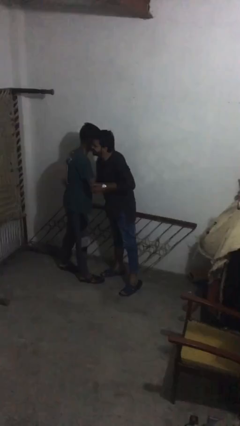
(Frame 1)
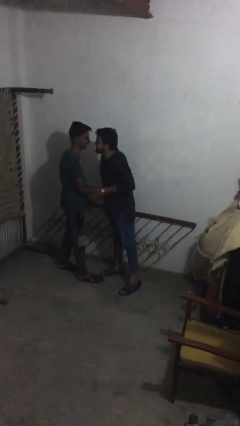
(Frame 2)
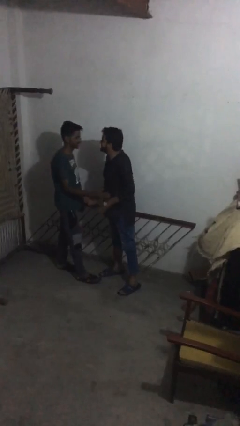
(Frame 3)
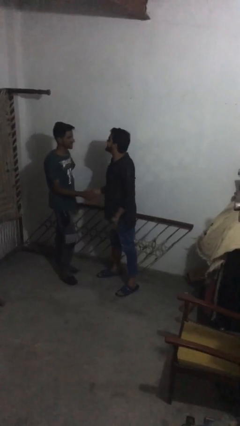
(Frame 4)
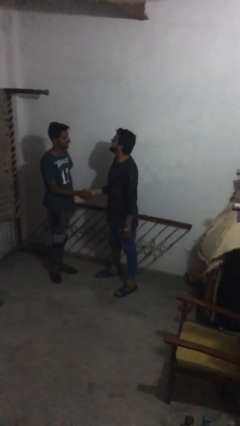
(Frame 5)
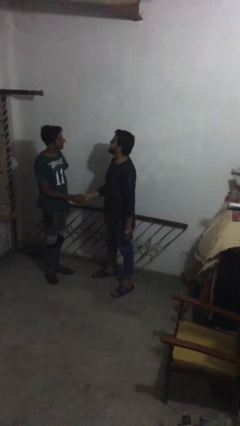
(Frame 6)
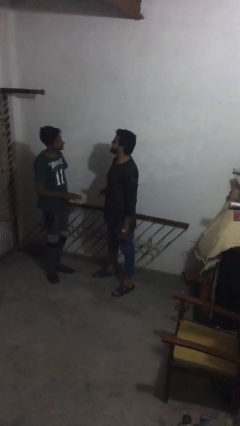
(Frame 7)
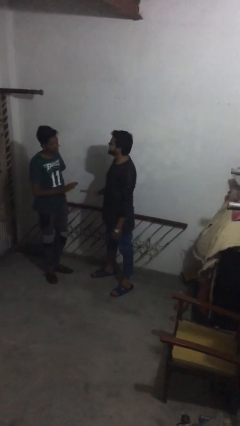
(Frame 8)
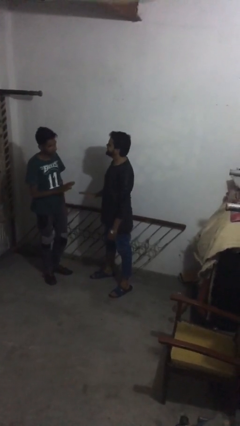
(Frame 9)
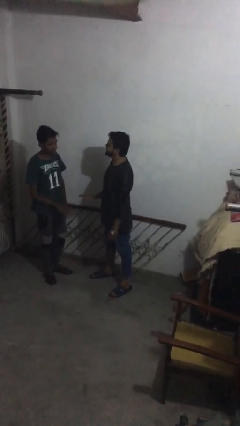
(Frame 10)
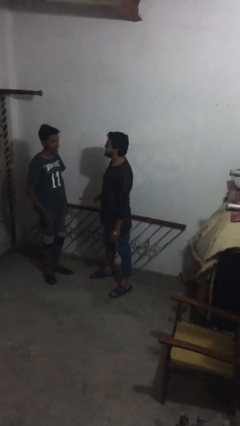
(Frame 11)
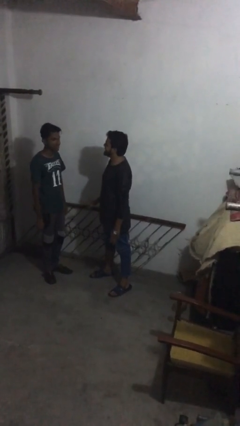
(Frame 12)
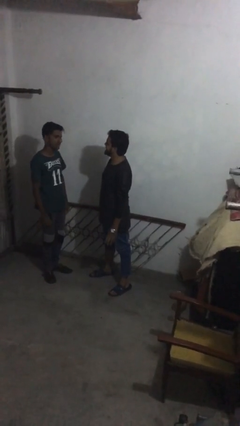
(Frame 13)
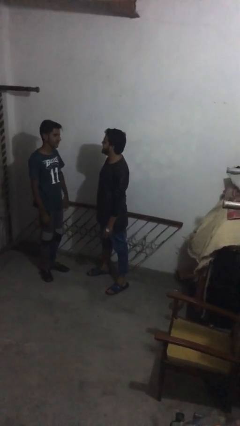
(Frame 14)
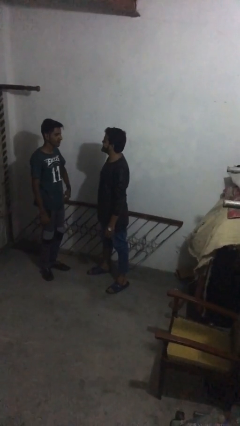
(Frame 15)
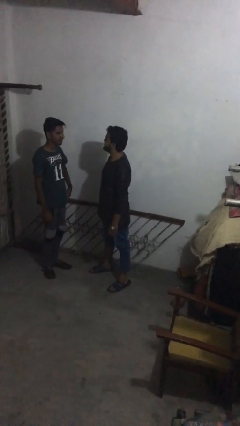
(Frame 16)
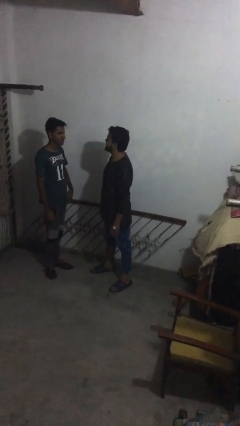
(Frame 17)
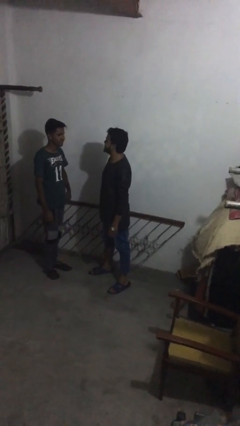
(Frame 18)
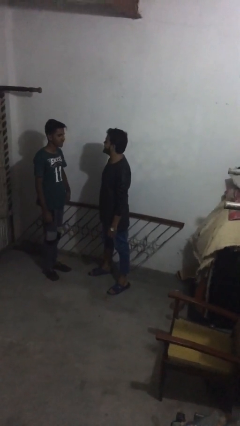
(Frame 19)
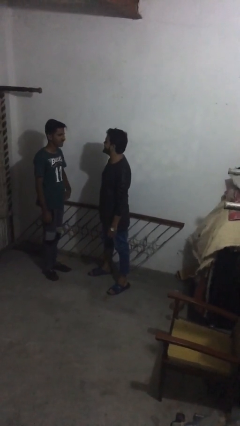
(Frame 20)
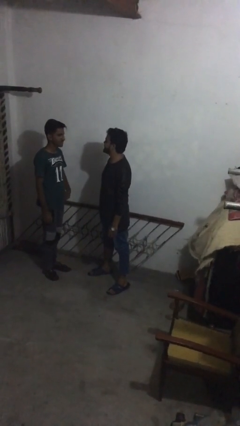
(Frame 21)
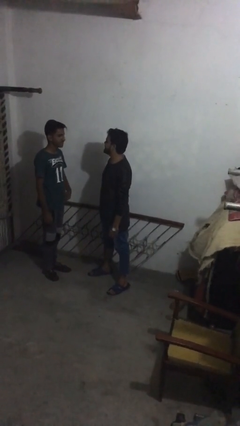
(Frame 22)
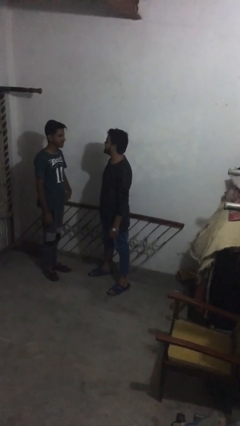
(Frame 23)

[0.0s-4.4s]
person talks to person

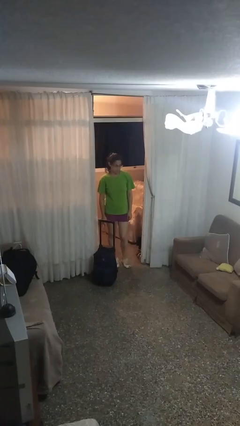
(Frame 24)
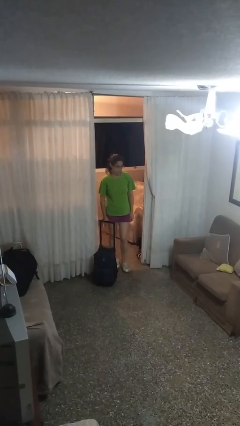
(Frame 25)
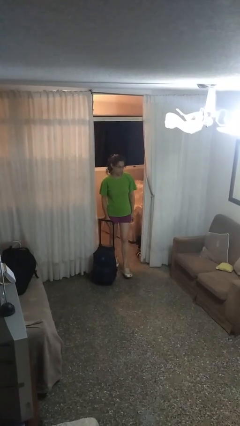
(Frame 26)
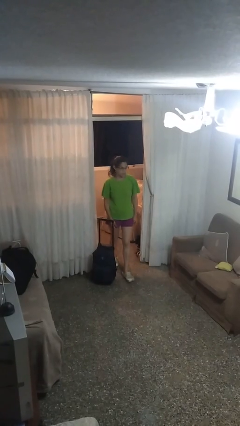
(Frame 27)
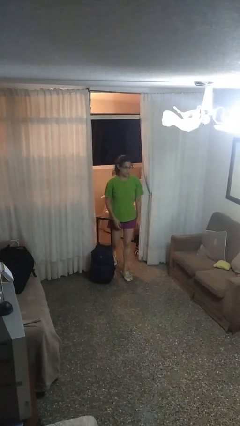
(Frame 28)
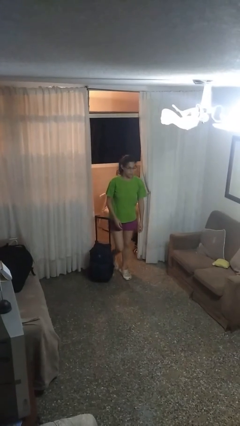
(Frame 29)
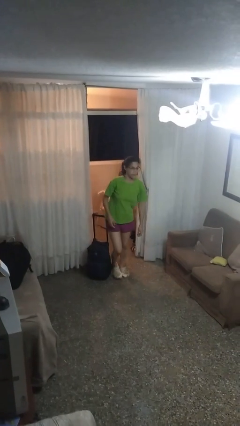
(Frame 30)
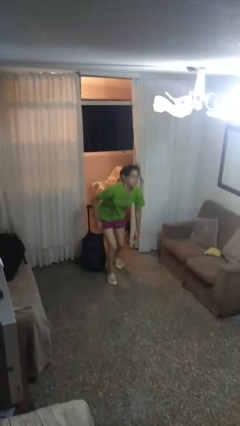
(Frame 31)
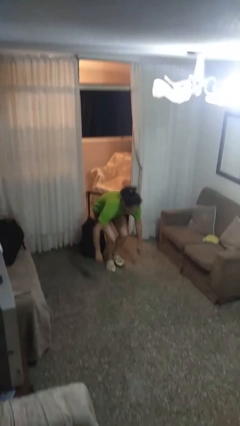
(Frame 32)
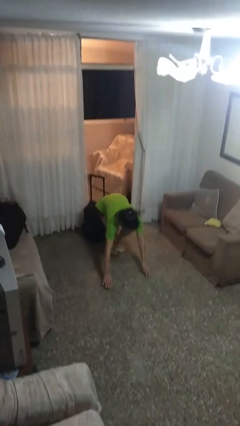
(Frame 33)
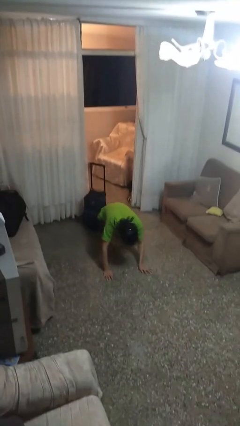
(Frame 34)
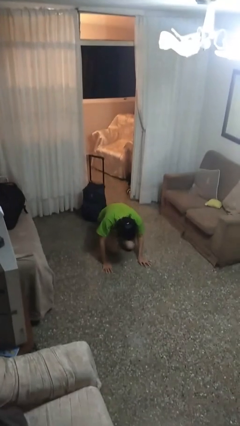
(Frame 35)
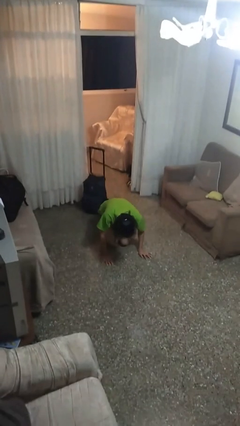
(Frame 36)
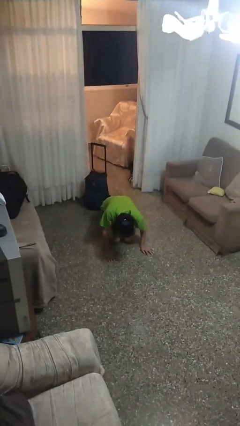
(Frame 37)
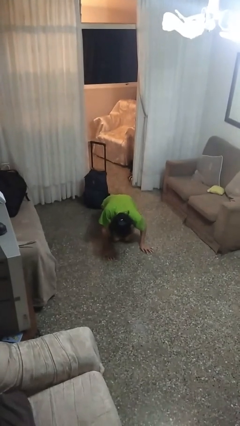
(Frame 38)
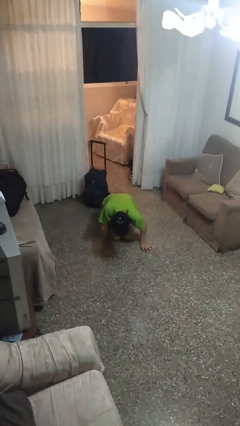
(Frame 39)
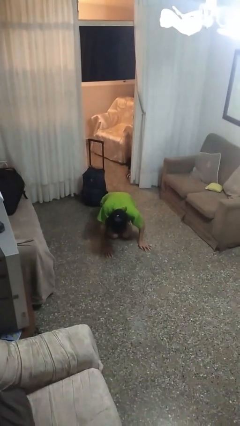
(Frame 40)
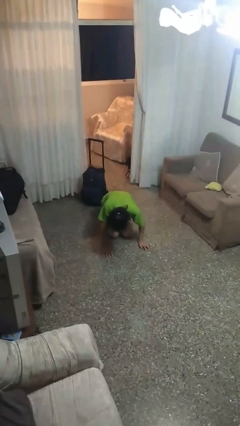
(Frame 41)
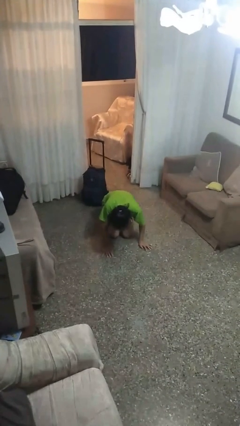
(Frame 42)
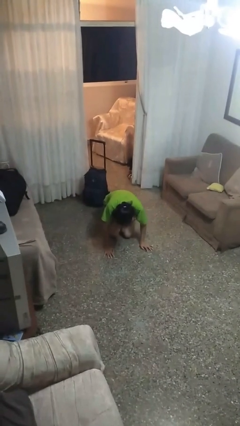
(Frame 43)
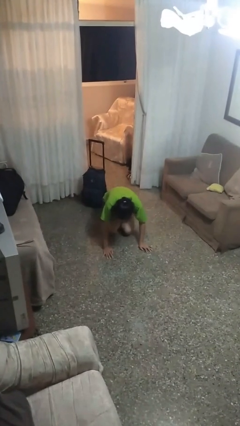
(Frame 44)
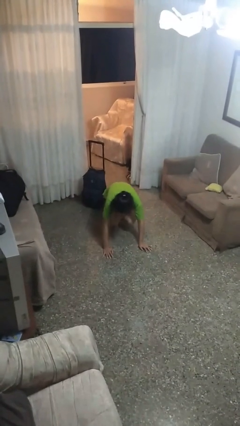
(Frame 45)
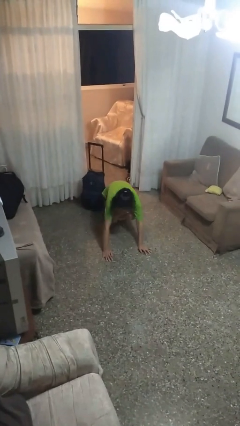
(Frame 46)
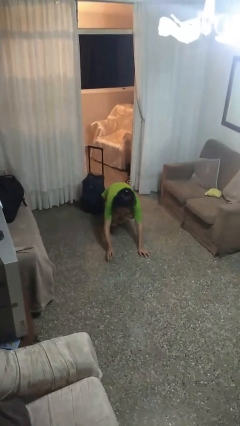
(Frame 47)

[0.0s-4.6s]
person trips on object on floor

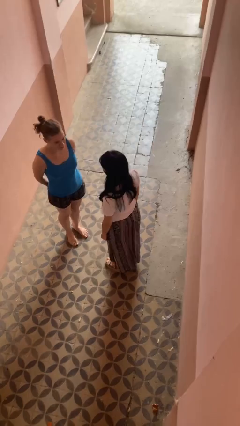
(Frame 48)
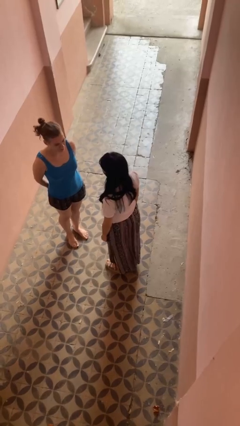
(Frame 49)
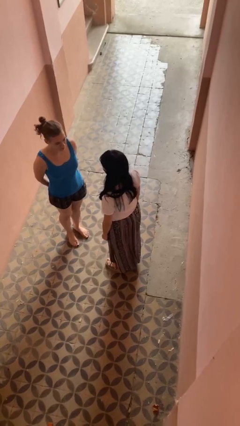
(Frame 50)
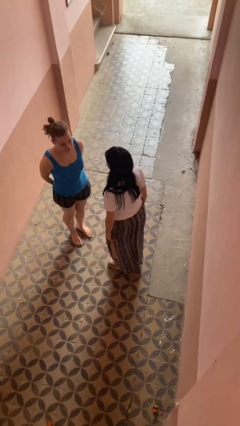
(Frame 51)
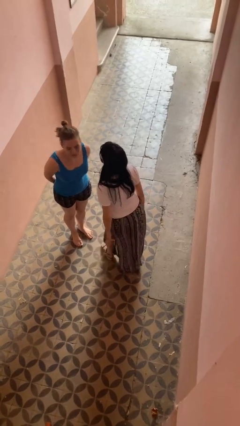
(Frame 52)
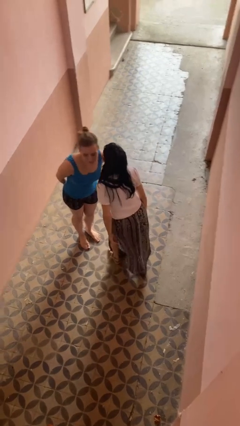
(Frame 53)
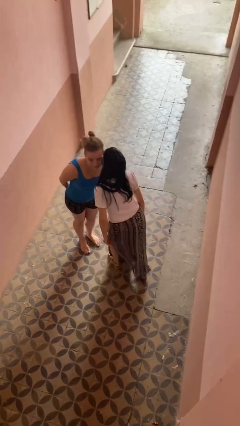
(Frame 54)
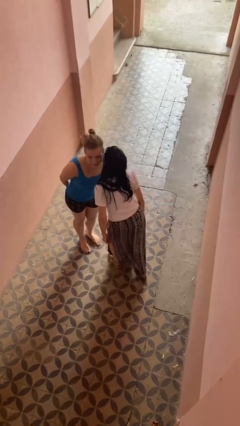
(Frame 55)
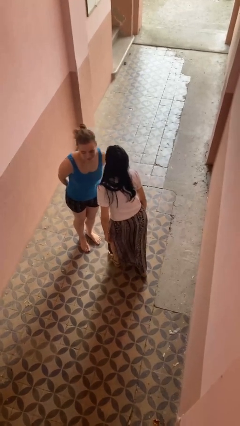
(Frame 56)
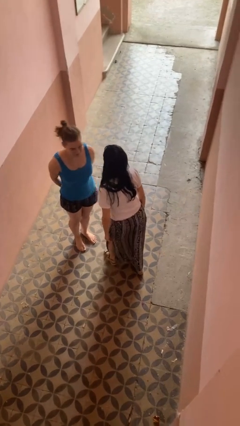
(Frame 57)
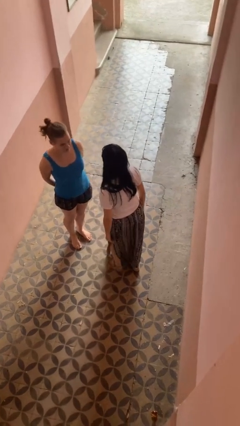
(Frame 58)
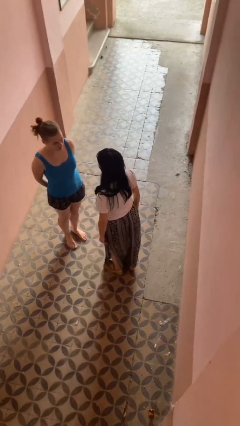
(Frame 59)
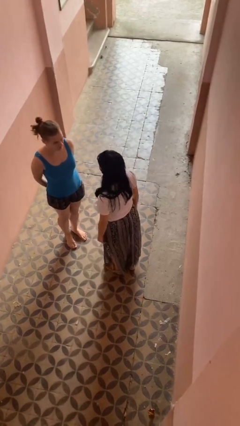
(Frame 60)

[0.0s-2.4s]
person kisses cheek of person

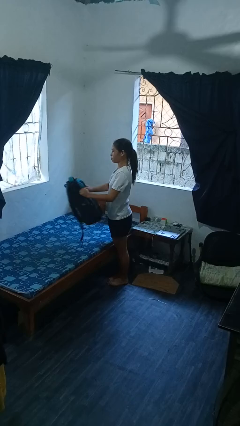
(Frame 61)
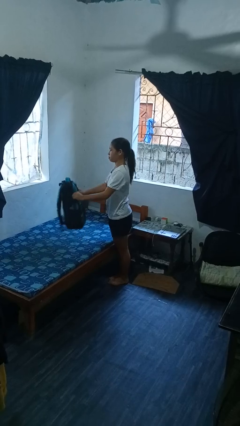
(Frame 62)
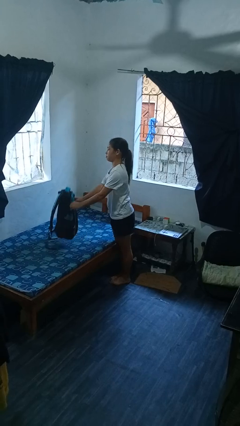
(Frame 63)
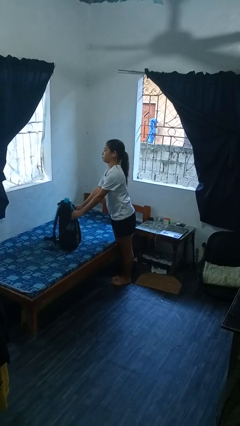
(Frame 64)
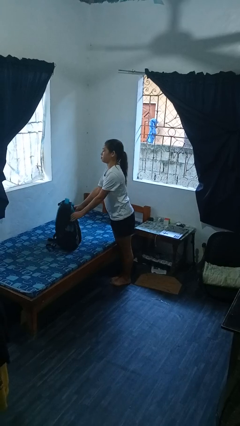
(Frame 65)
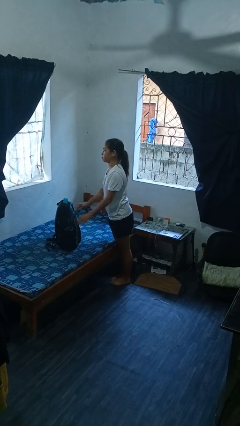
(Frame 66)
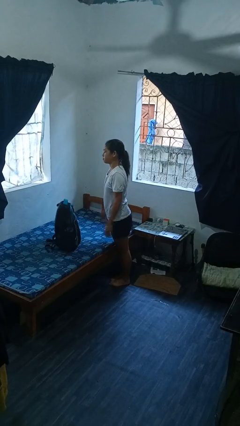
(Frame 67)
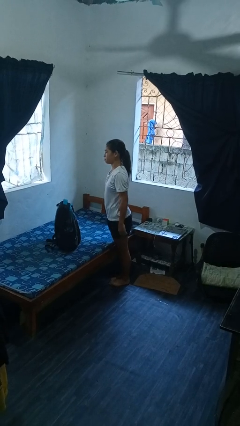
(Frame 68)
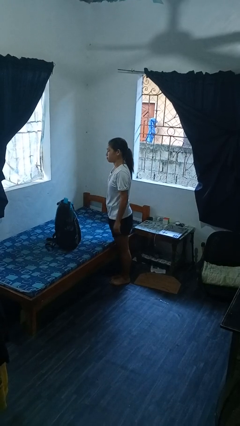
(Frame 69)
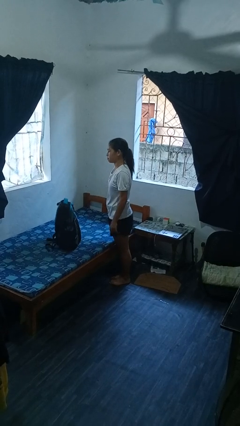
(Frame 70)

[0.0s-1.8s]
person puts down object on bed

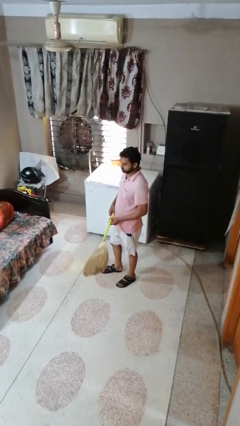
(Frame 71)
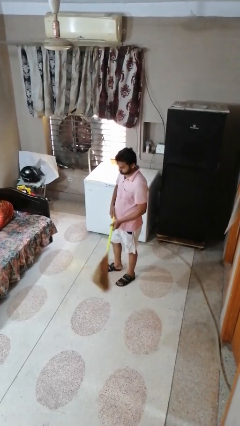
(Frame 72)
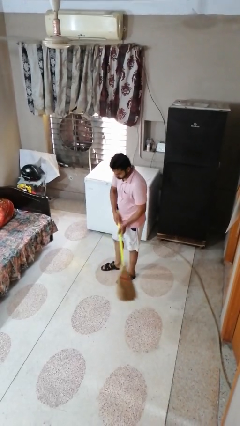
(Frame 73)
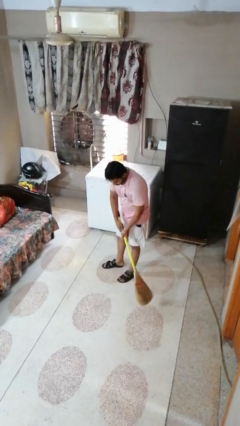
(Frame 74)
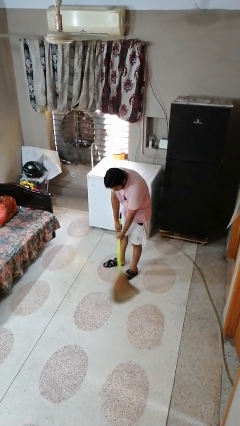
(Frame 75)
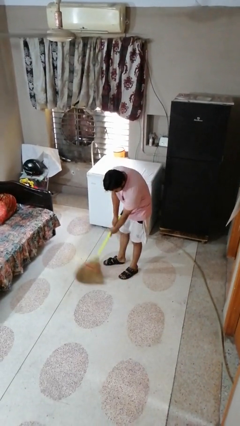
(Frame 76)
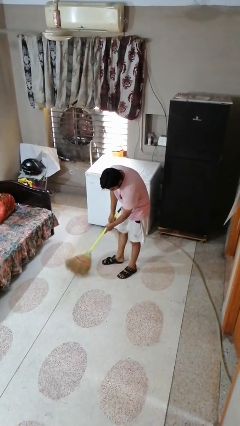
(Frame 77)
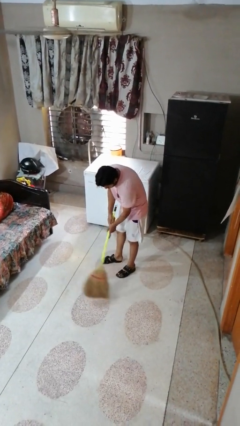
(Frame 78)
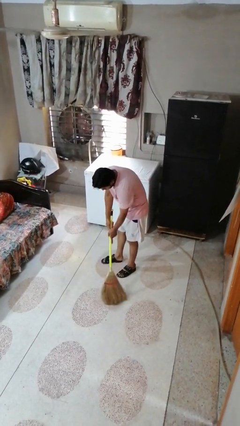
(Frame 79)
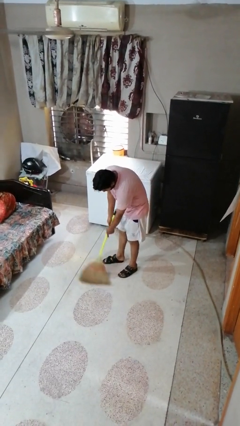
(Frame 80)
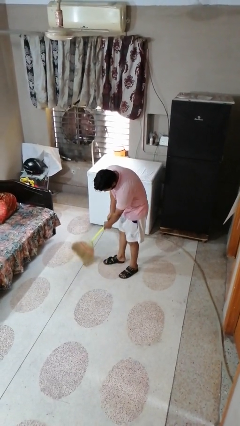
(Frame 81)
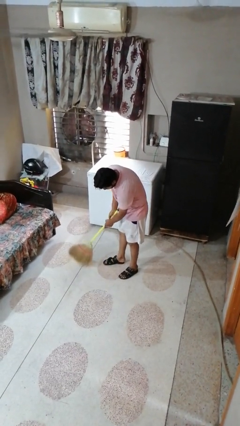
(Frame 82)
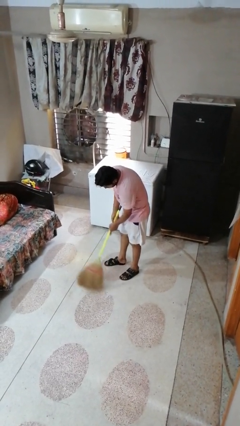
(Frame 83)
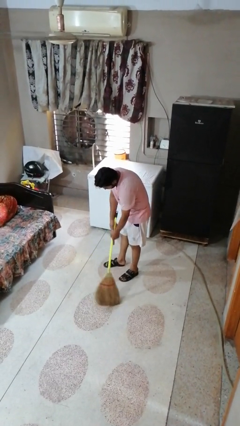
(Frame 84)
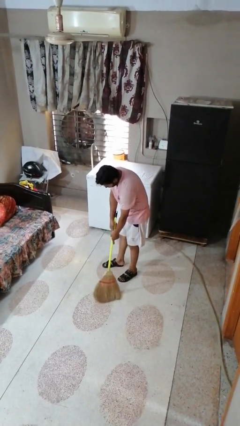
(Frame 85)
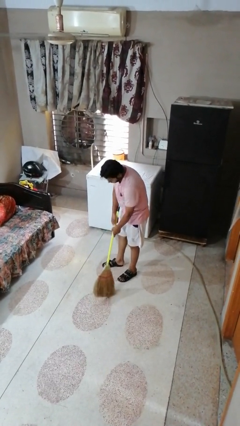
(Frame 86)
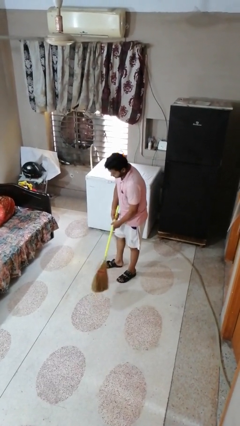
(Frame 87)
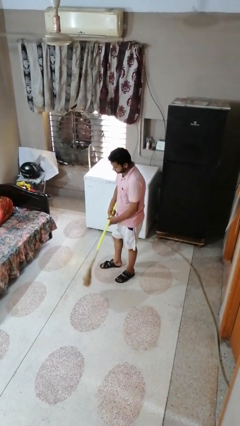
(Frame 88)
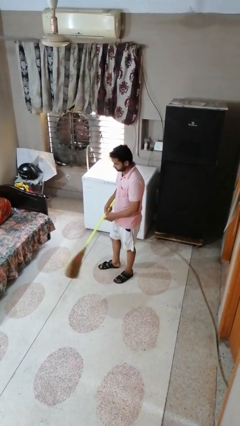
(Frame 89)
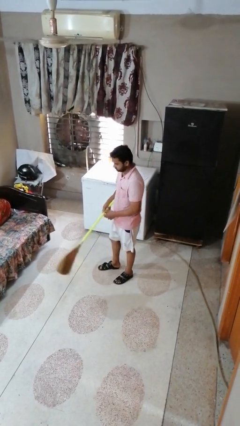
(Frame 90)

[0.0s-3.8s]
person sweeps floor

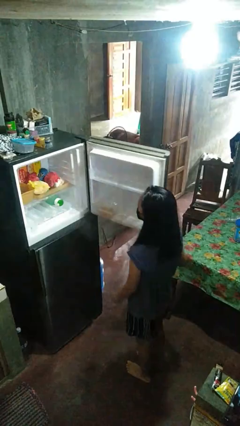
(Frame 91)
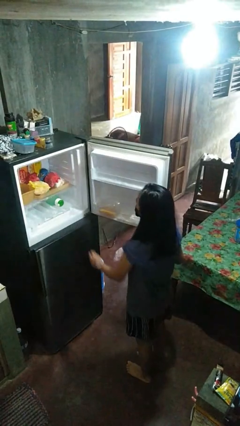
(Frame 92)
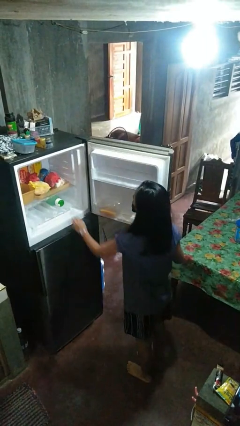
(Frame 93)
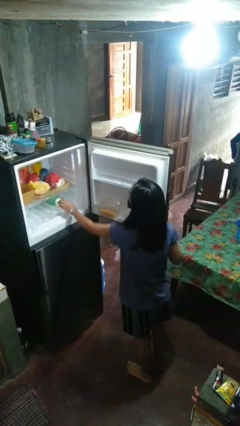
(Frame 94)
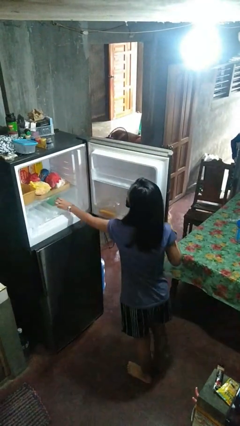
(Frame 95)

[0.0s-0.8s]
person takes object from refrigerator
